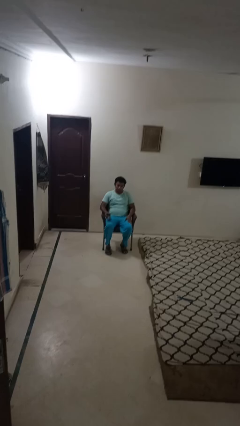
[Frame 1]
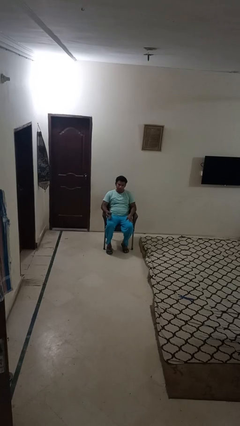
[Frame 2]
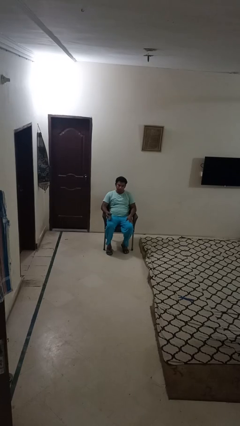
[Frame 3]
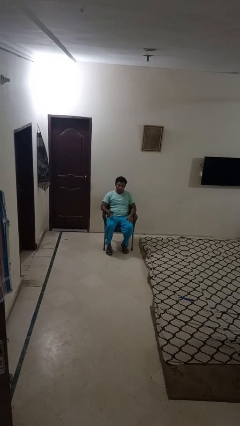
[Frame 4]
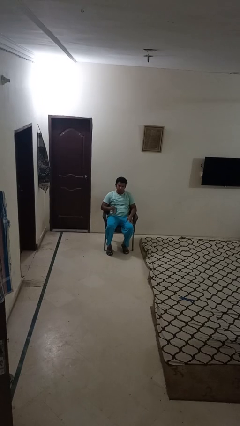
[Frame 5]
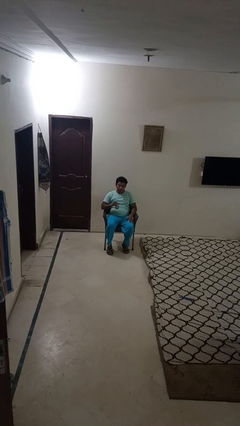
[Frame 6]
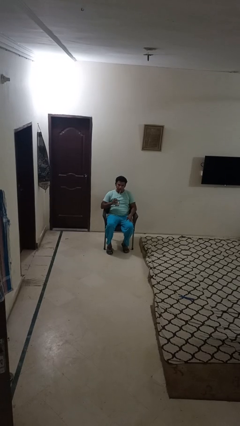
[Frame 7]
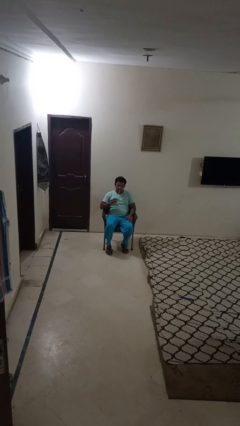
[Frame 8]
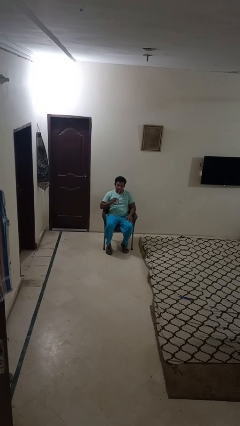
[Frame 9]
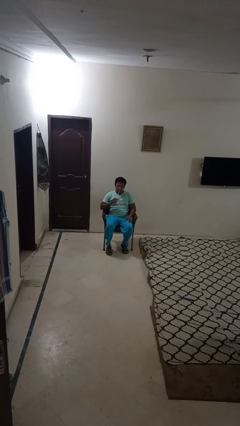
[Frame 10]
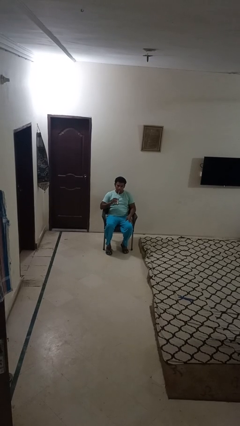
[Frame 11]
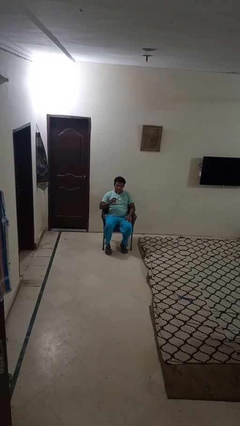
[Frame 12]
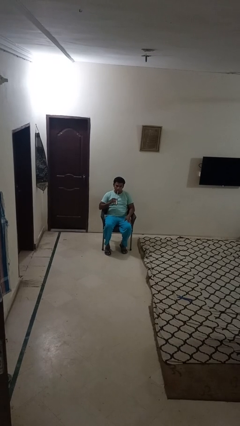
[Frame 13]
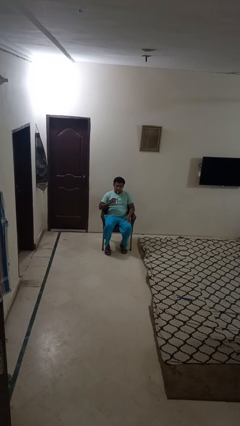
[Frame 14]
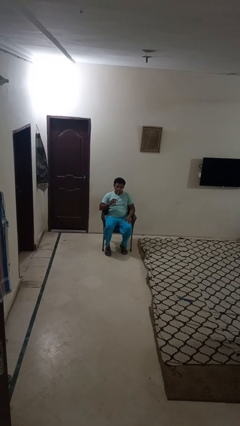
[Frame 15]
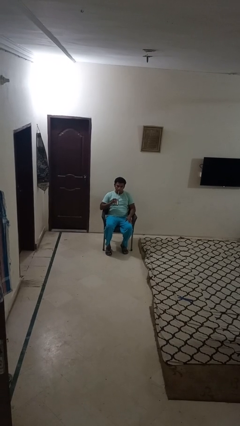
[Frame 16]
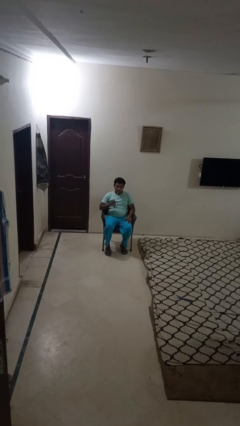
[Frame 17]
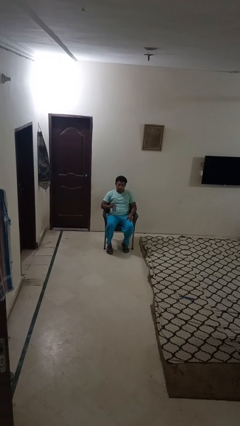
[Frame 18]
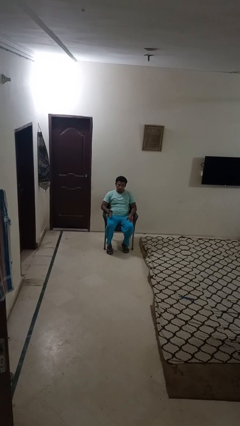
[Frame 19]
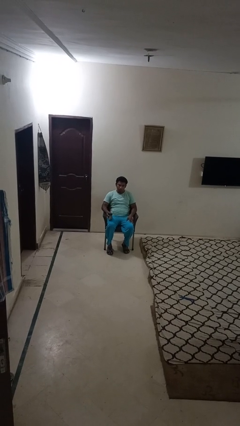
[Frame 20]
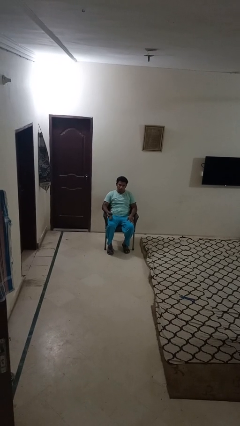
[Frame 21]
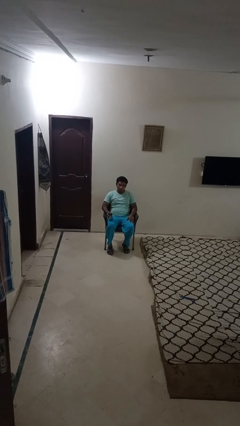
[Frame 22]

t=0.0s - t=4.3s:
person drinks from straw

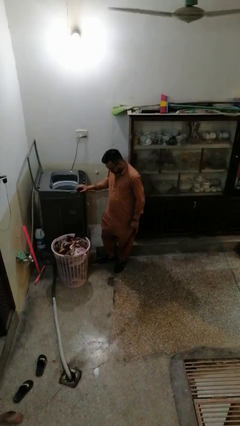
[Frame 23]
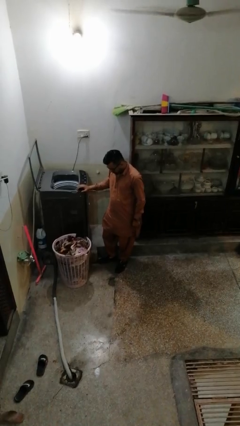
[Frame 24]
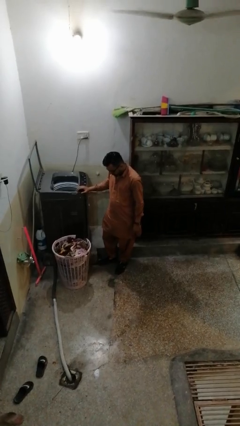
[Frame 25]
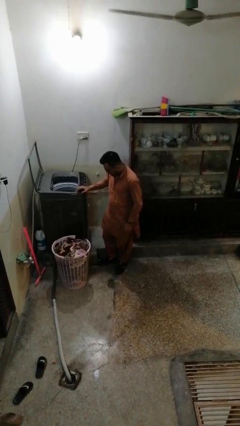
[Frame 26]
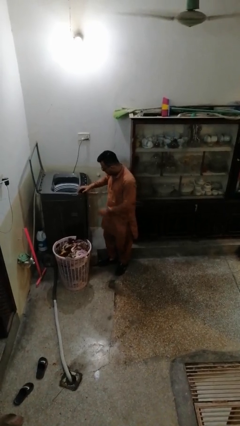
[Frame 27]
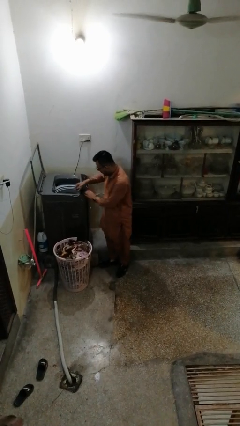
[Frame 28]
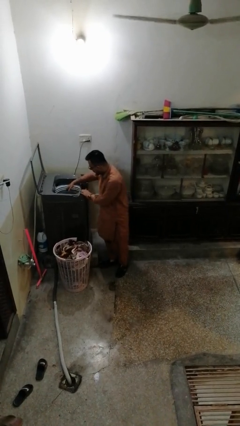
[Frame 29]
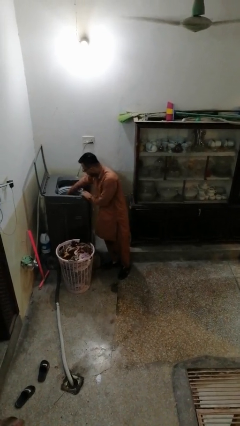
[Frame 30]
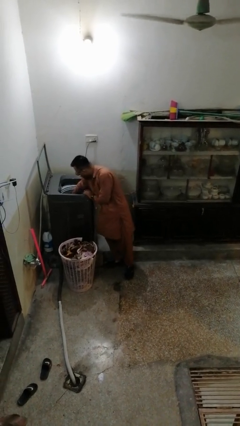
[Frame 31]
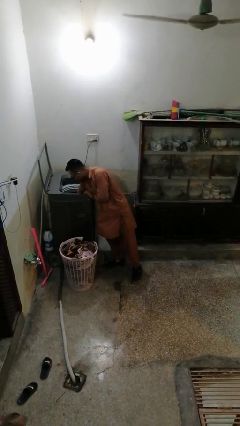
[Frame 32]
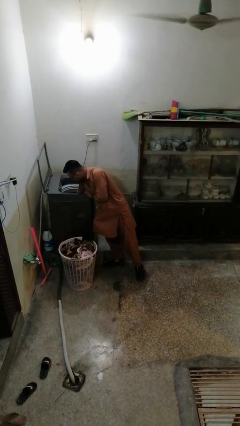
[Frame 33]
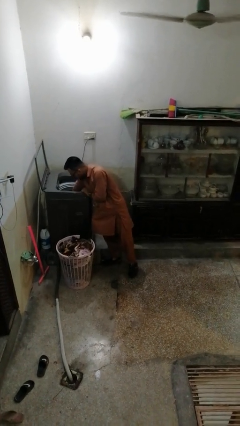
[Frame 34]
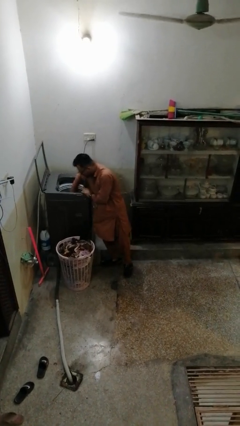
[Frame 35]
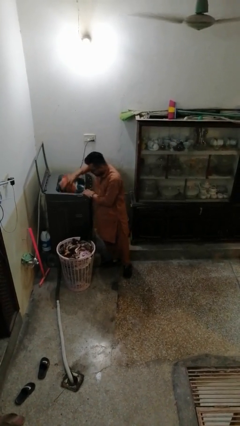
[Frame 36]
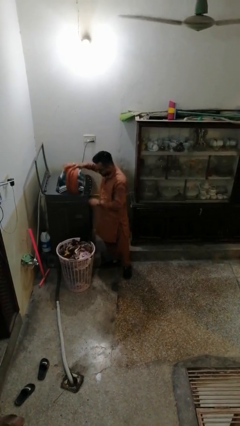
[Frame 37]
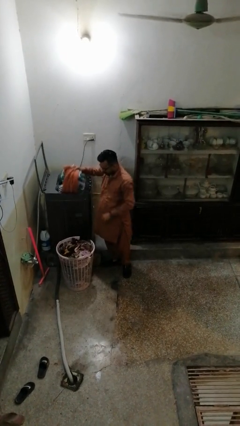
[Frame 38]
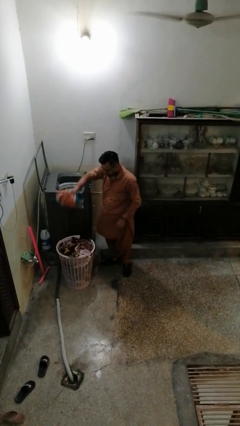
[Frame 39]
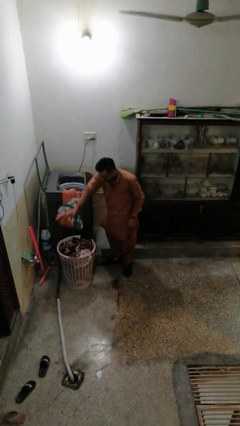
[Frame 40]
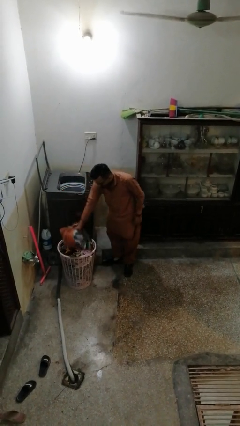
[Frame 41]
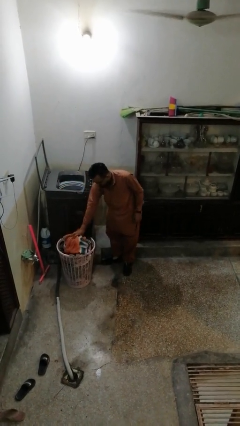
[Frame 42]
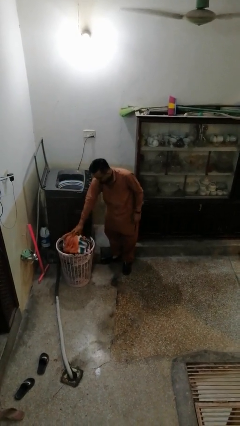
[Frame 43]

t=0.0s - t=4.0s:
person unloads clotheswasher

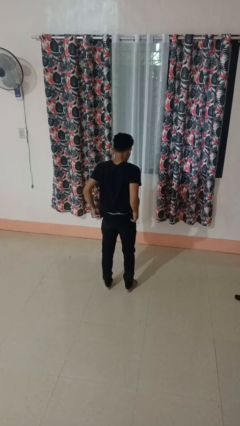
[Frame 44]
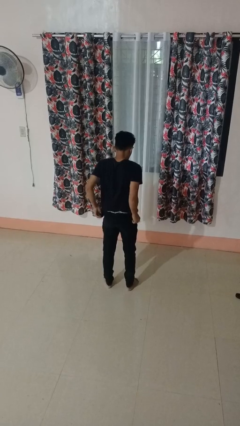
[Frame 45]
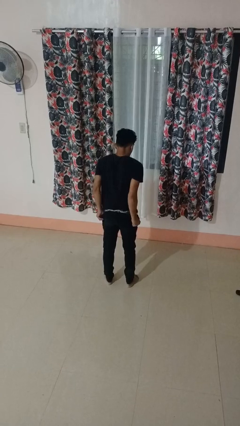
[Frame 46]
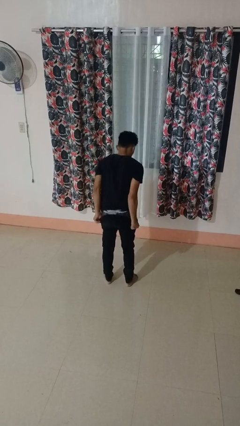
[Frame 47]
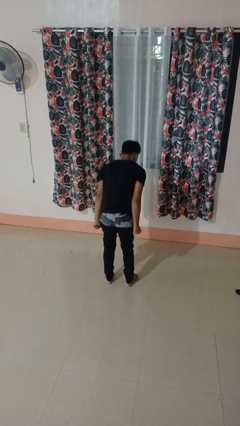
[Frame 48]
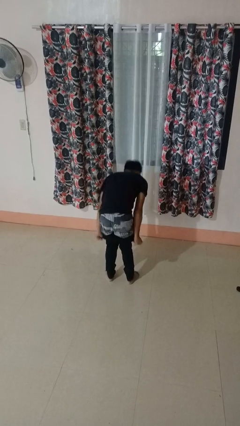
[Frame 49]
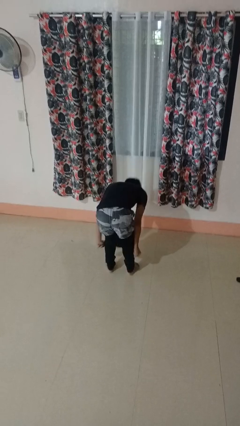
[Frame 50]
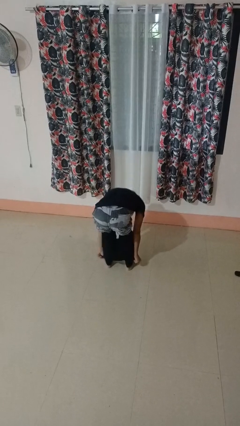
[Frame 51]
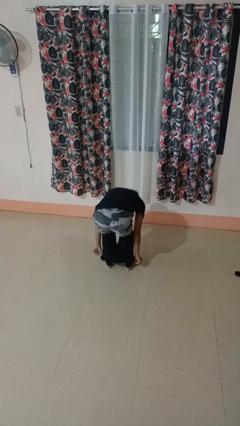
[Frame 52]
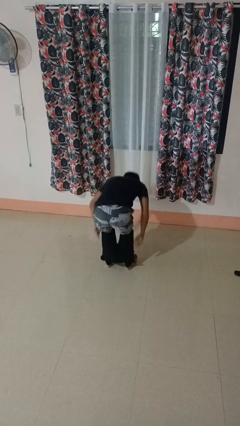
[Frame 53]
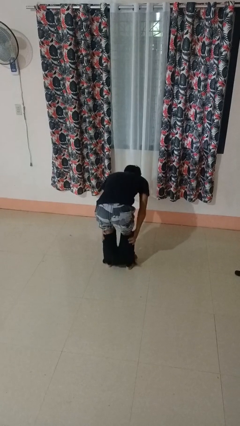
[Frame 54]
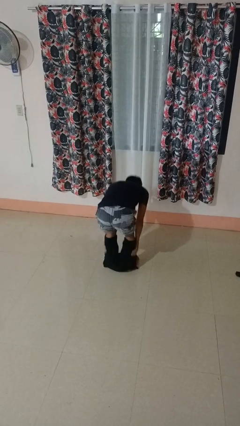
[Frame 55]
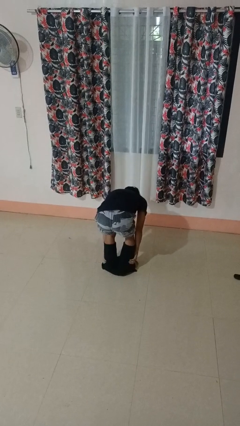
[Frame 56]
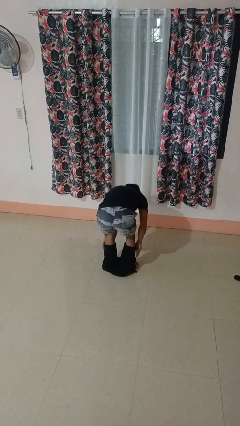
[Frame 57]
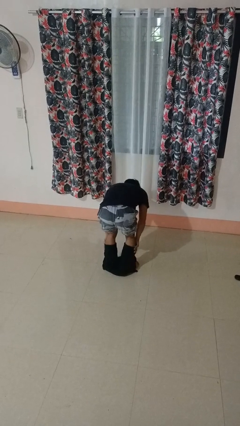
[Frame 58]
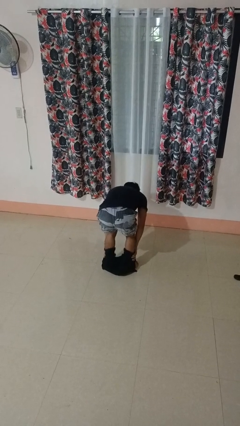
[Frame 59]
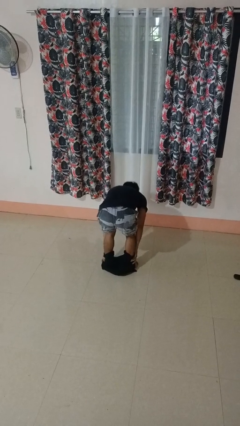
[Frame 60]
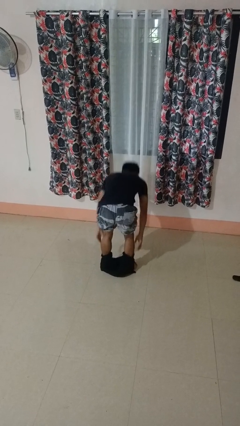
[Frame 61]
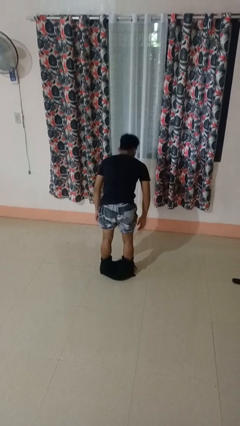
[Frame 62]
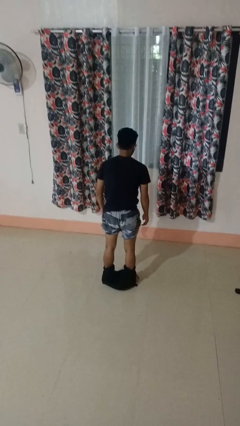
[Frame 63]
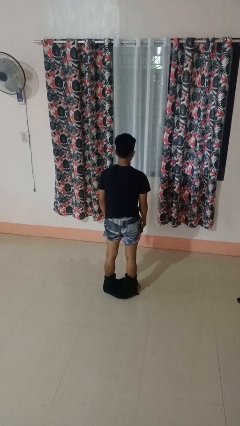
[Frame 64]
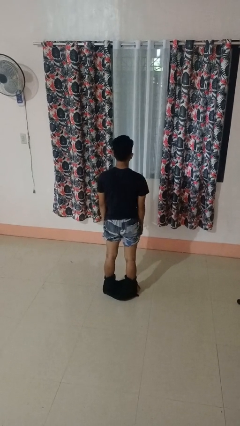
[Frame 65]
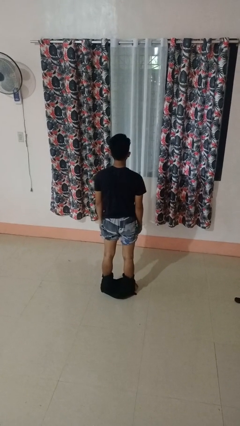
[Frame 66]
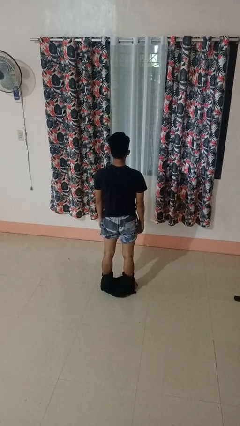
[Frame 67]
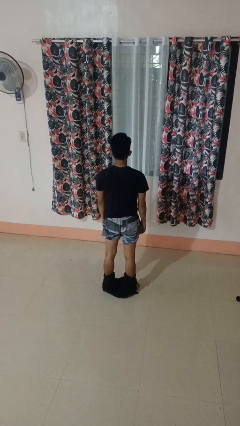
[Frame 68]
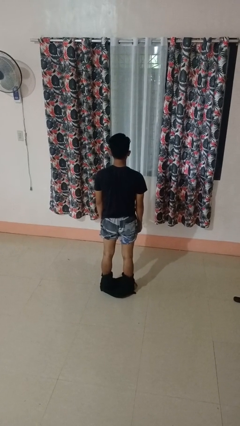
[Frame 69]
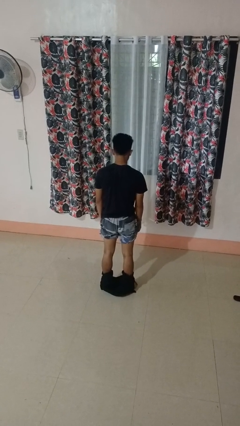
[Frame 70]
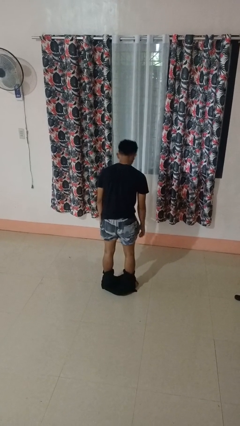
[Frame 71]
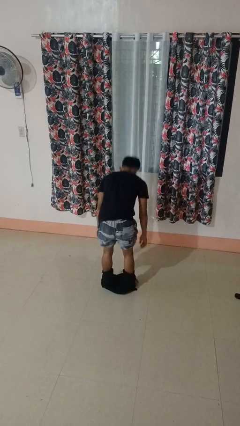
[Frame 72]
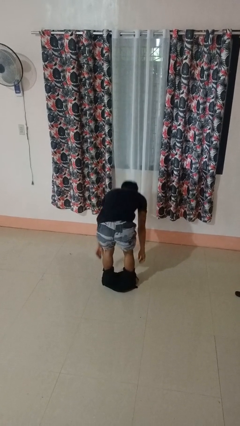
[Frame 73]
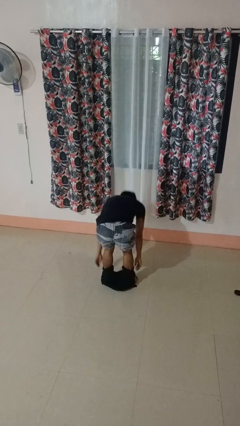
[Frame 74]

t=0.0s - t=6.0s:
person takes off pants

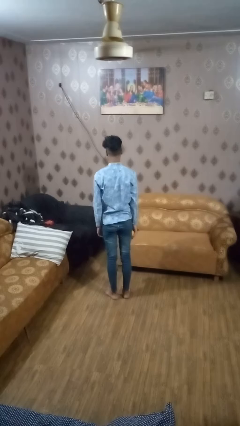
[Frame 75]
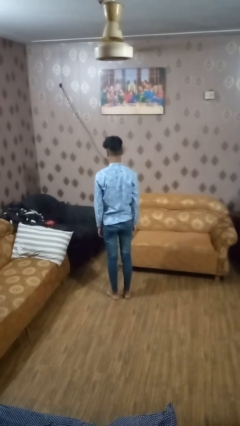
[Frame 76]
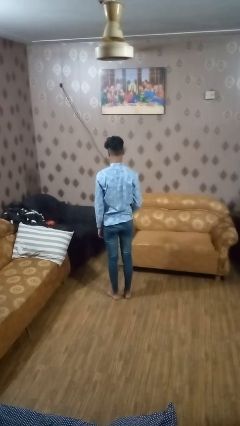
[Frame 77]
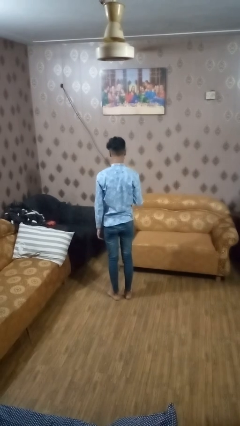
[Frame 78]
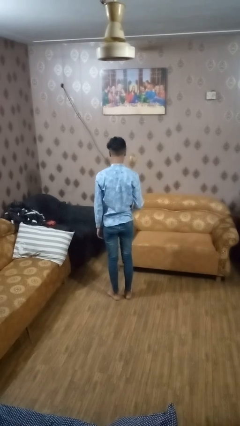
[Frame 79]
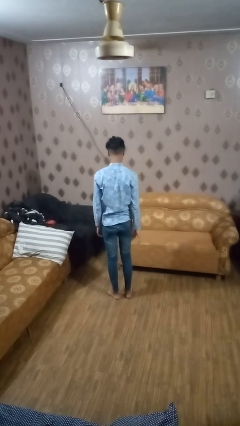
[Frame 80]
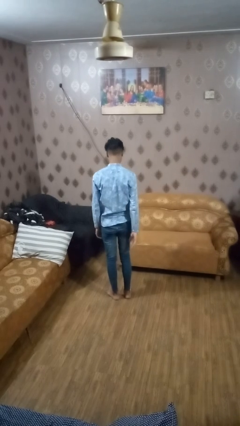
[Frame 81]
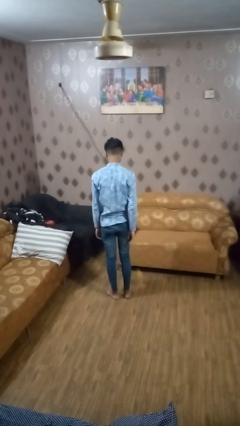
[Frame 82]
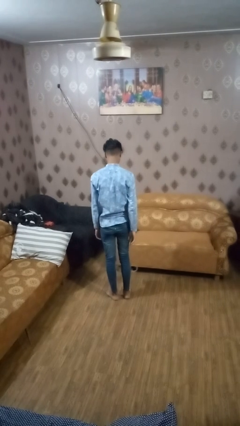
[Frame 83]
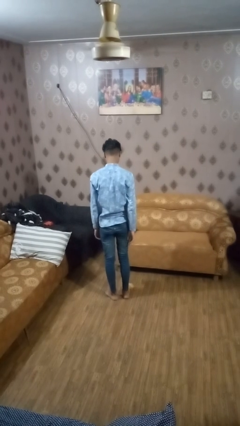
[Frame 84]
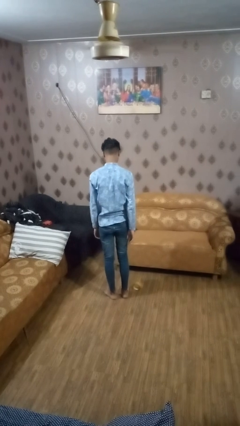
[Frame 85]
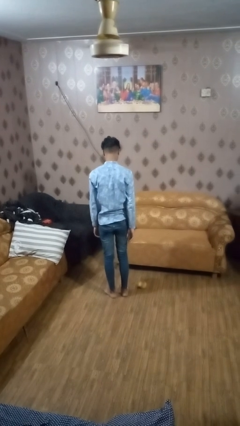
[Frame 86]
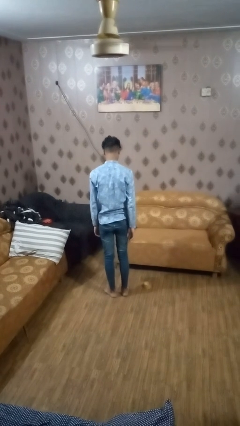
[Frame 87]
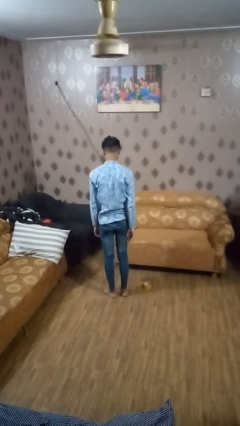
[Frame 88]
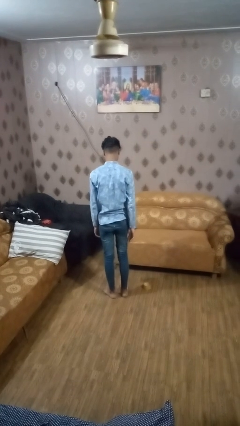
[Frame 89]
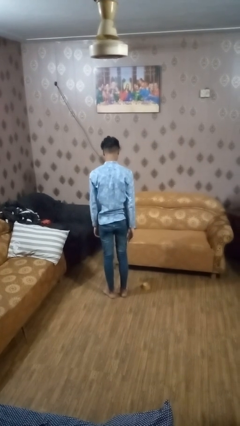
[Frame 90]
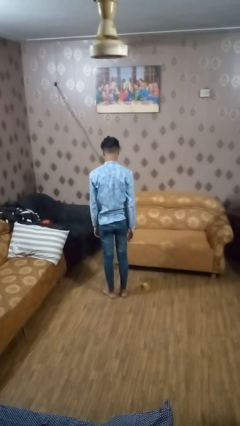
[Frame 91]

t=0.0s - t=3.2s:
person throws object into air

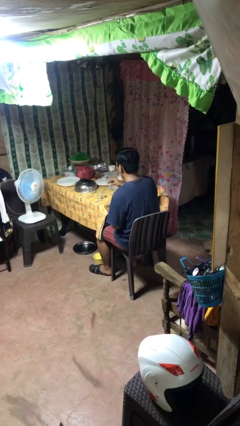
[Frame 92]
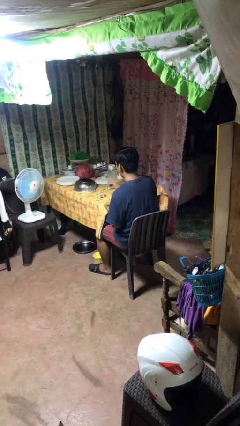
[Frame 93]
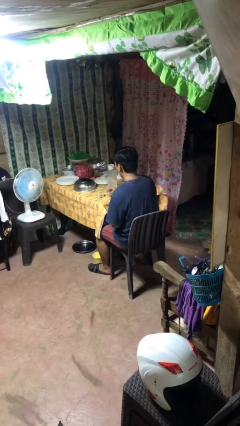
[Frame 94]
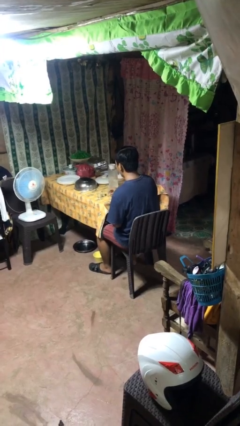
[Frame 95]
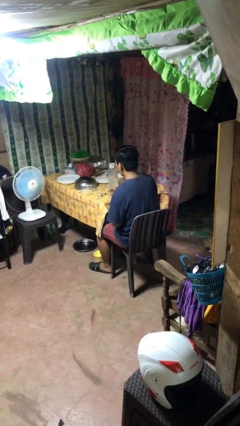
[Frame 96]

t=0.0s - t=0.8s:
person puts down object on table
